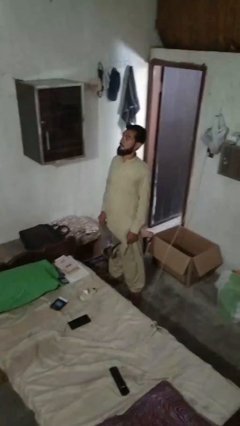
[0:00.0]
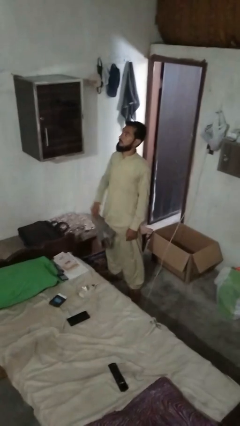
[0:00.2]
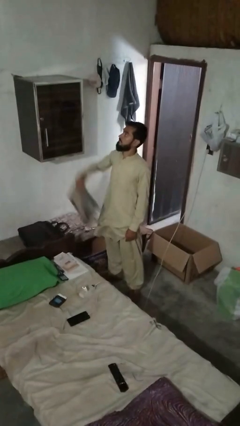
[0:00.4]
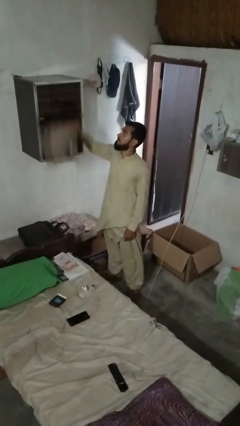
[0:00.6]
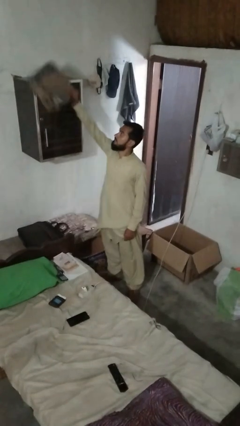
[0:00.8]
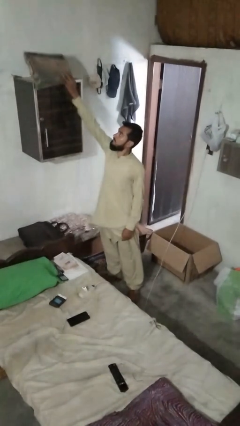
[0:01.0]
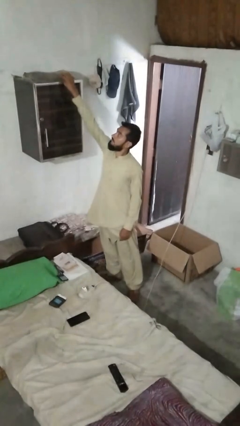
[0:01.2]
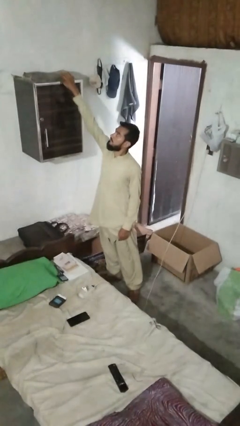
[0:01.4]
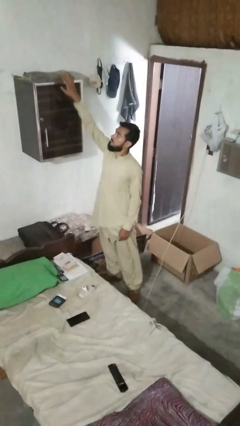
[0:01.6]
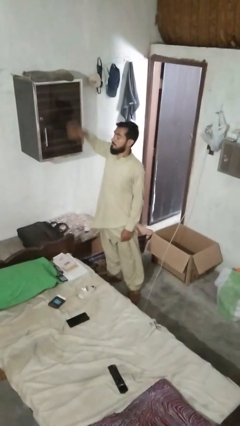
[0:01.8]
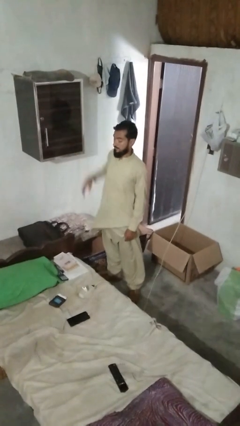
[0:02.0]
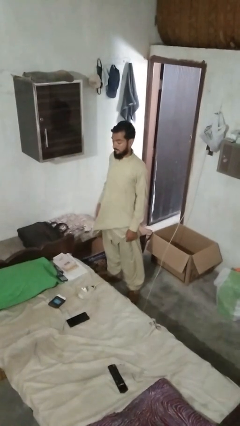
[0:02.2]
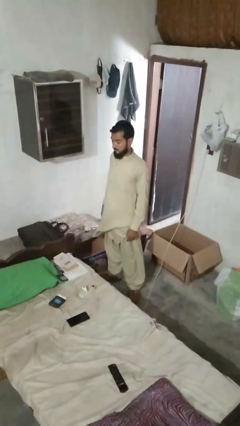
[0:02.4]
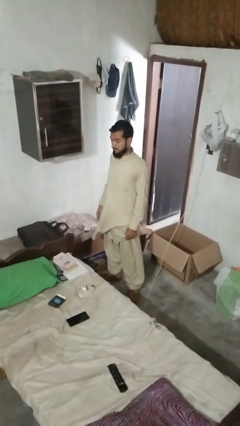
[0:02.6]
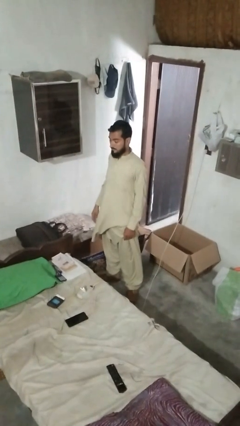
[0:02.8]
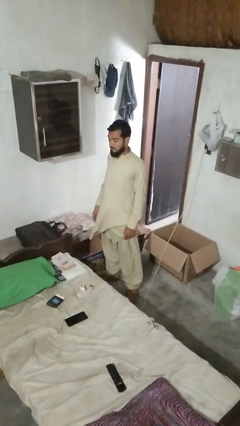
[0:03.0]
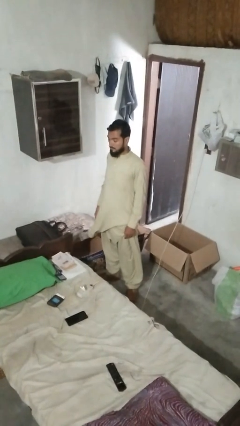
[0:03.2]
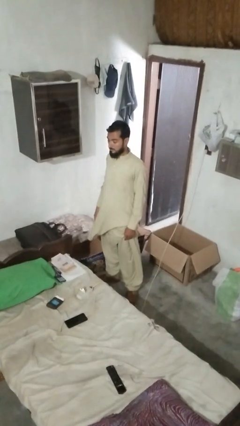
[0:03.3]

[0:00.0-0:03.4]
person picks up object from shelf

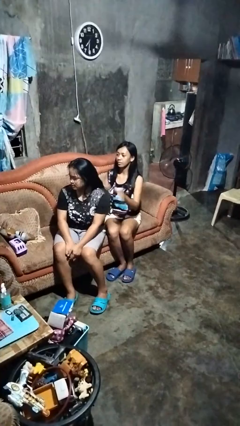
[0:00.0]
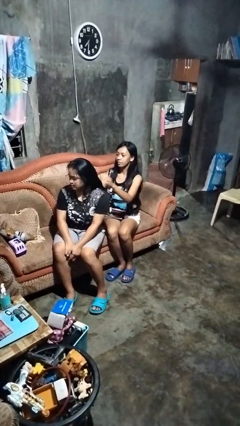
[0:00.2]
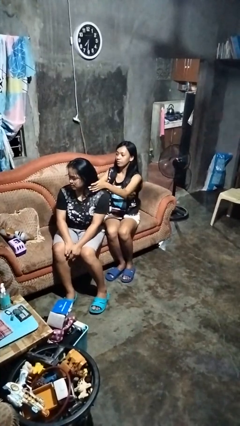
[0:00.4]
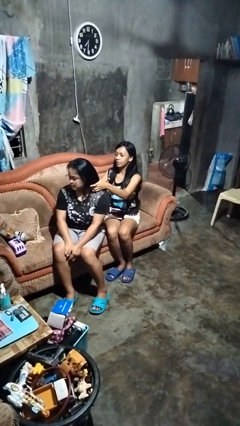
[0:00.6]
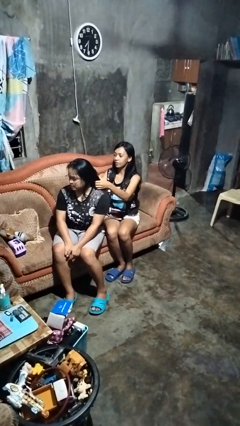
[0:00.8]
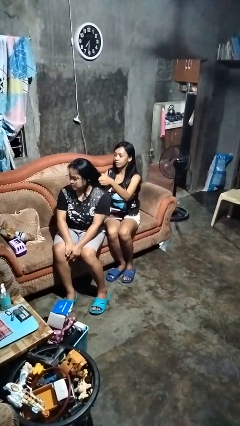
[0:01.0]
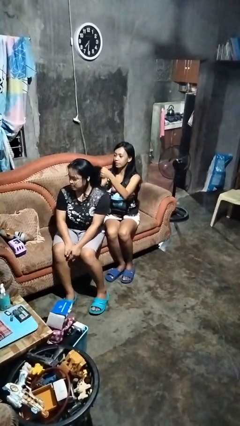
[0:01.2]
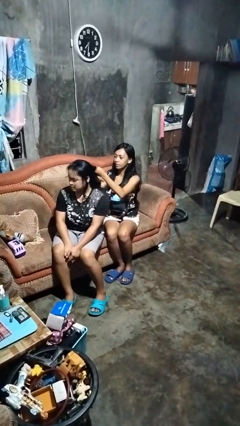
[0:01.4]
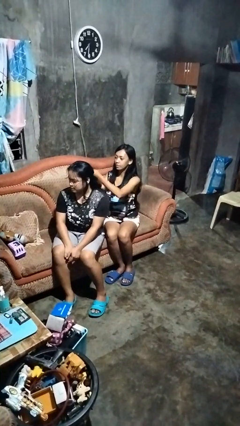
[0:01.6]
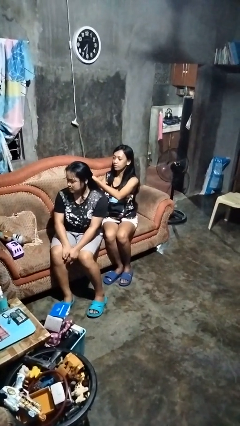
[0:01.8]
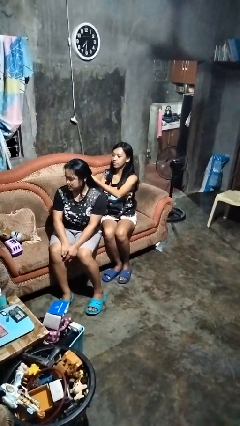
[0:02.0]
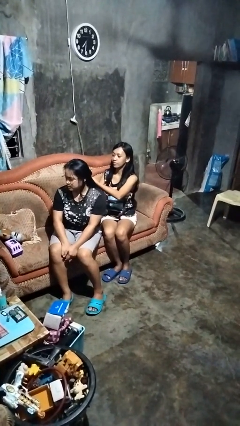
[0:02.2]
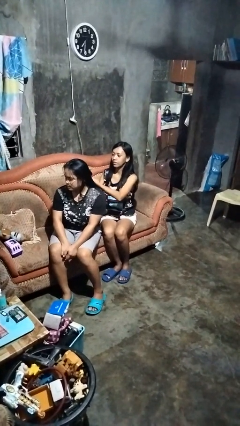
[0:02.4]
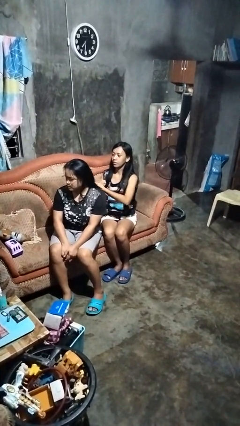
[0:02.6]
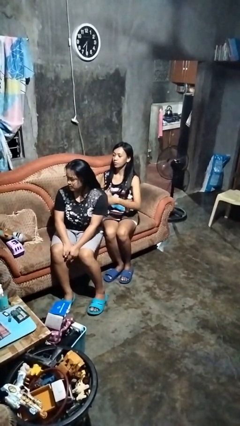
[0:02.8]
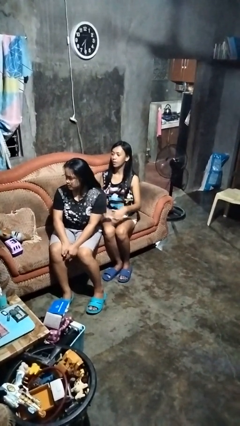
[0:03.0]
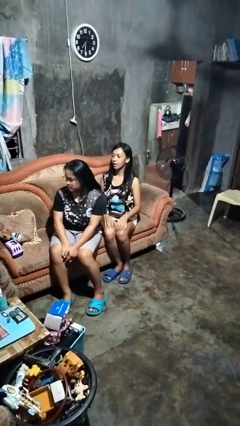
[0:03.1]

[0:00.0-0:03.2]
person braids hair of person

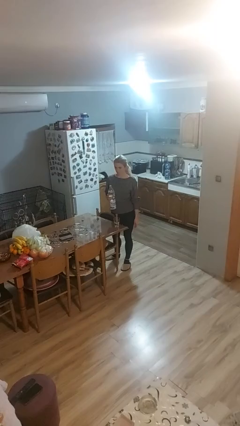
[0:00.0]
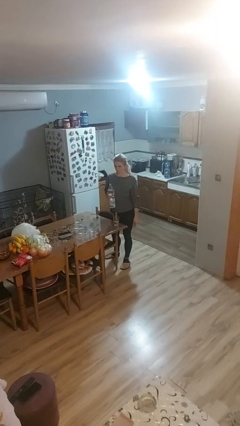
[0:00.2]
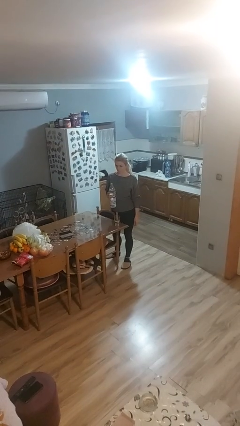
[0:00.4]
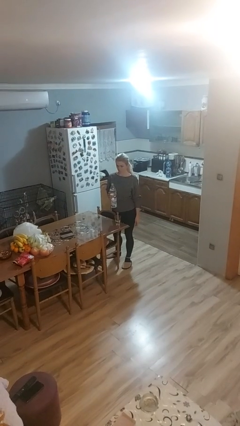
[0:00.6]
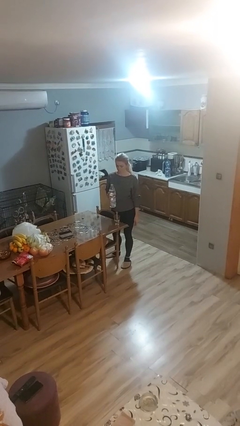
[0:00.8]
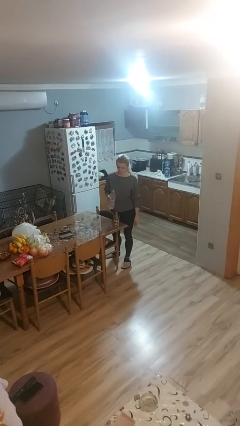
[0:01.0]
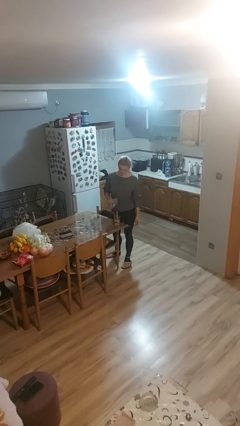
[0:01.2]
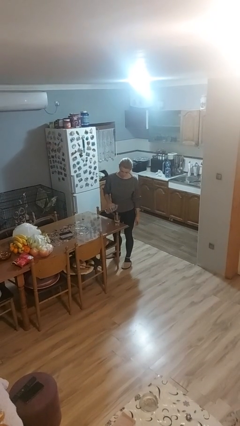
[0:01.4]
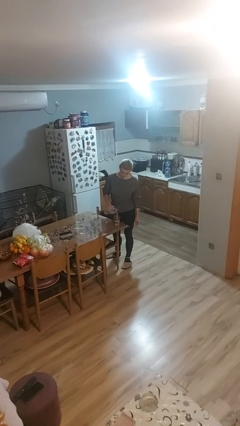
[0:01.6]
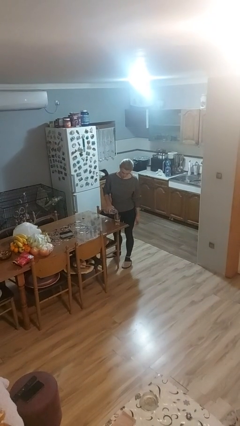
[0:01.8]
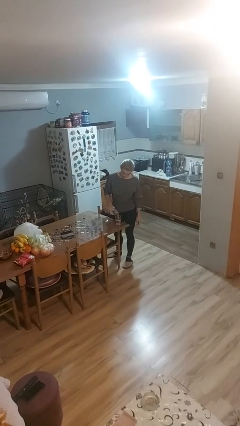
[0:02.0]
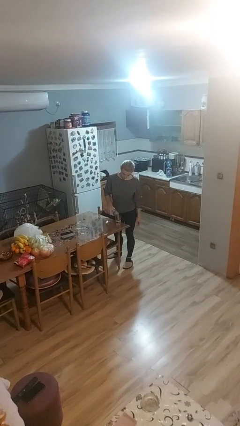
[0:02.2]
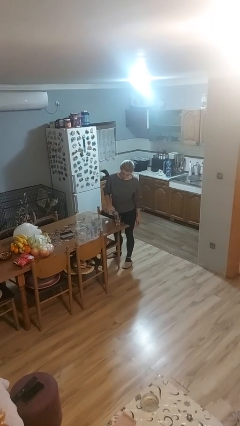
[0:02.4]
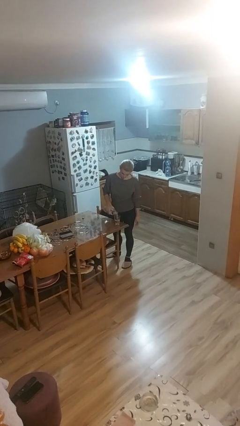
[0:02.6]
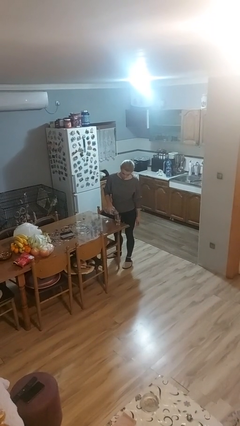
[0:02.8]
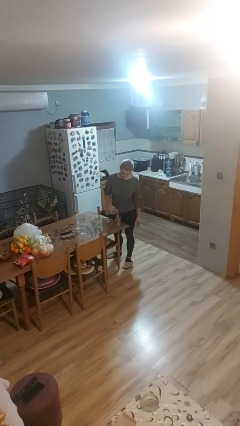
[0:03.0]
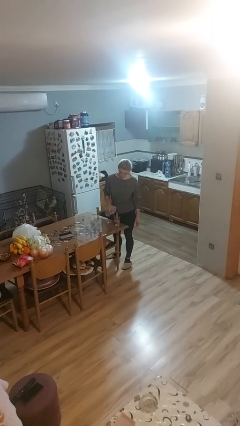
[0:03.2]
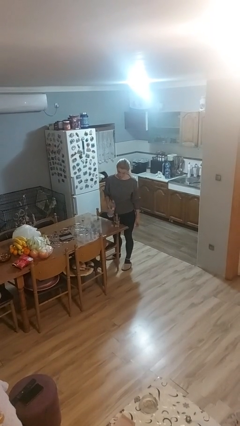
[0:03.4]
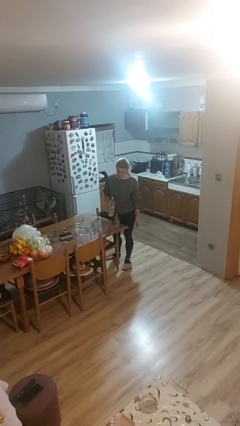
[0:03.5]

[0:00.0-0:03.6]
person pours liquid into cup

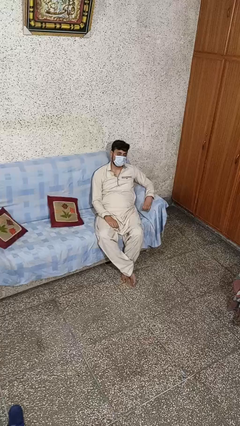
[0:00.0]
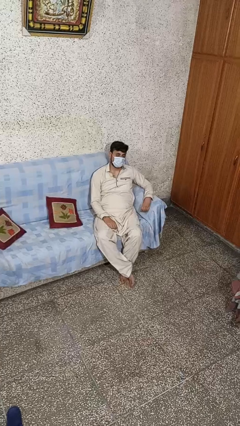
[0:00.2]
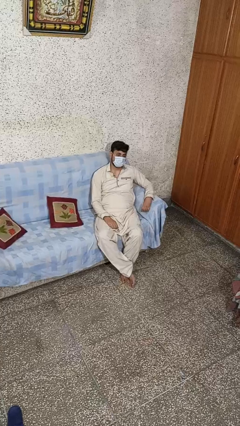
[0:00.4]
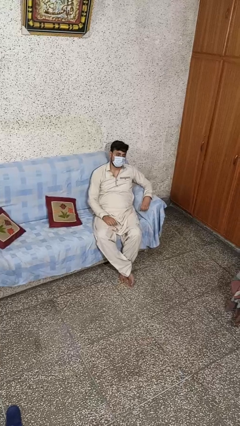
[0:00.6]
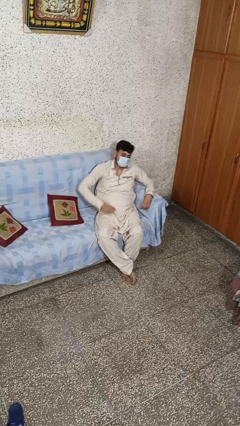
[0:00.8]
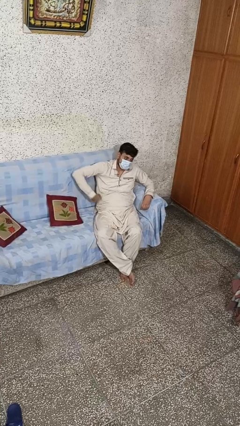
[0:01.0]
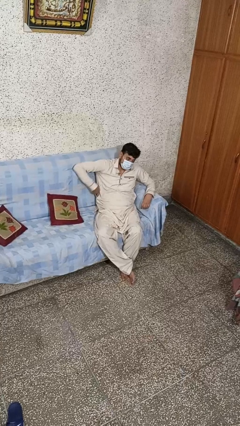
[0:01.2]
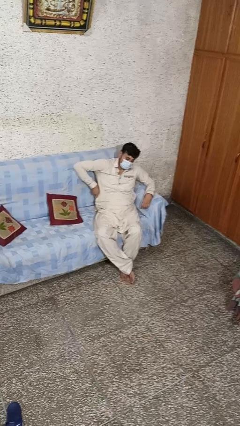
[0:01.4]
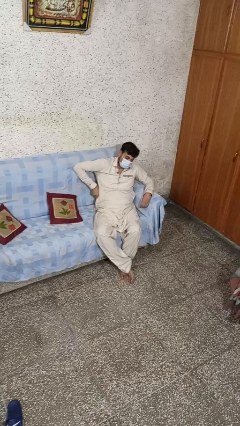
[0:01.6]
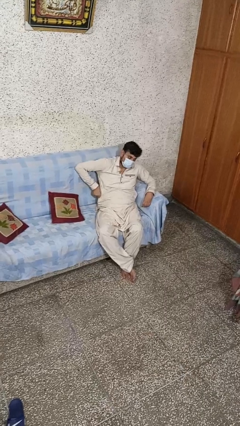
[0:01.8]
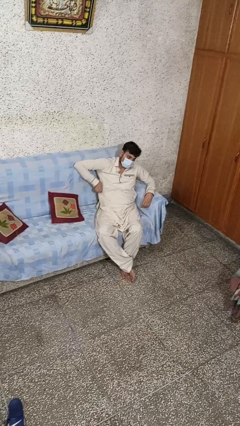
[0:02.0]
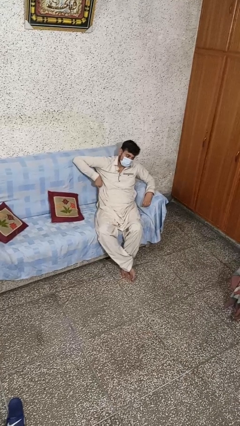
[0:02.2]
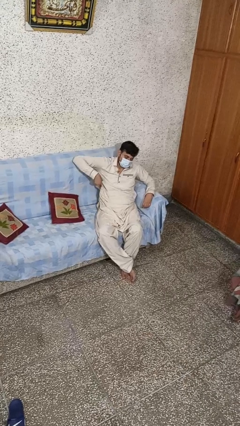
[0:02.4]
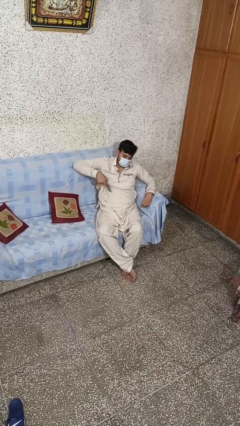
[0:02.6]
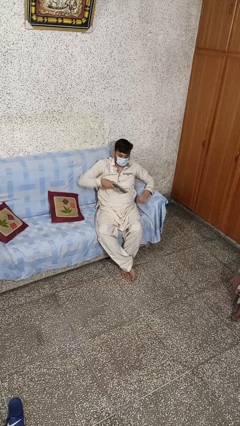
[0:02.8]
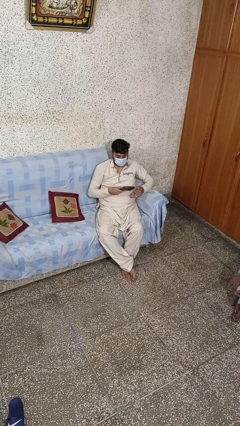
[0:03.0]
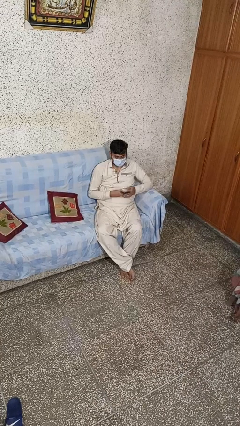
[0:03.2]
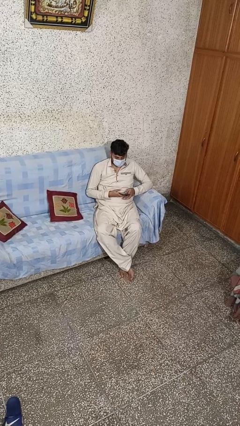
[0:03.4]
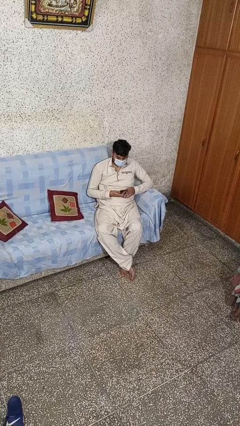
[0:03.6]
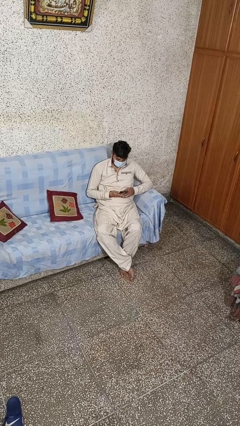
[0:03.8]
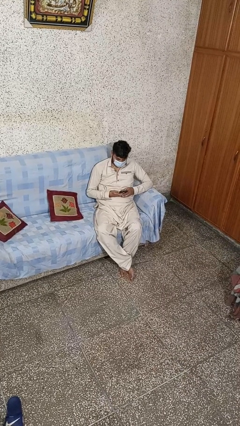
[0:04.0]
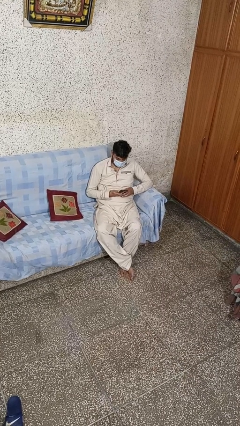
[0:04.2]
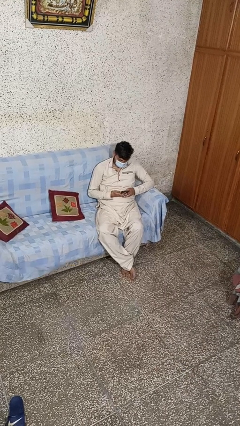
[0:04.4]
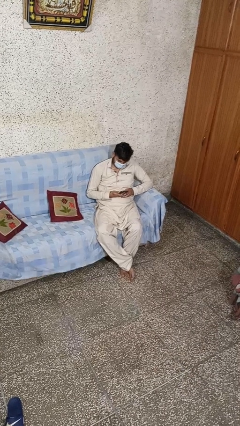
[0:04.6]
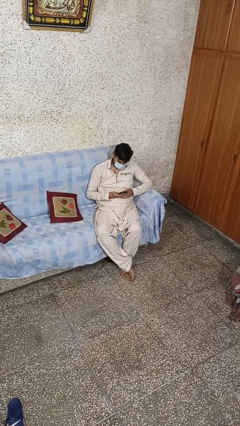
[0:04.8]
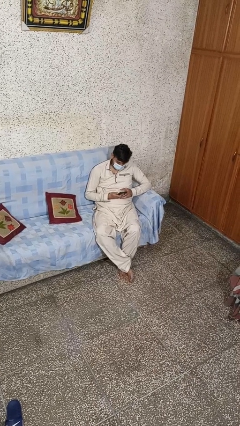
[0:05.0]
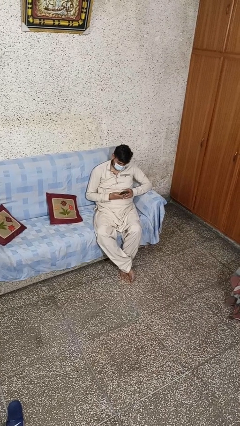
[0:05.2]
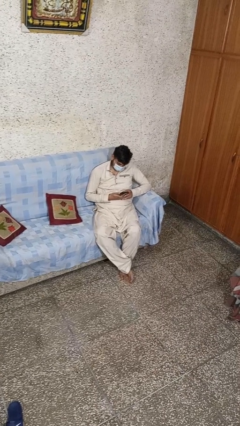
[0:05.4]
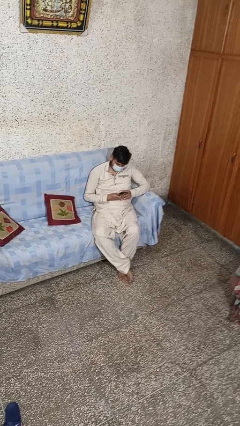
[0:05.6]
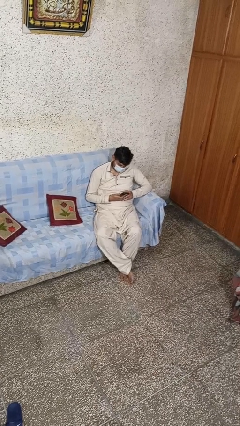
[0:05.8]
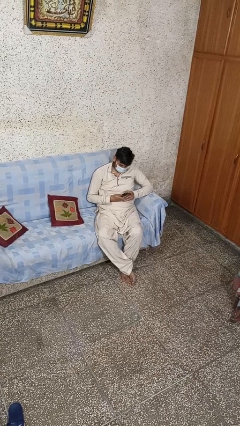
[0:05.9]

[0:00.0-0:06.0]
person takes phone from pocket

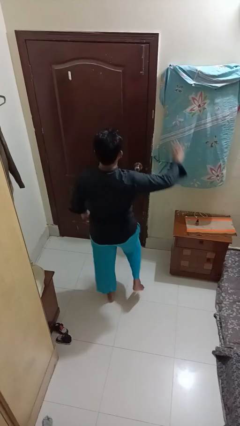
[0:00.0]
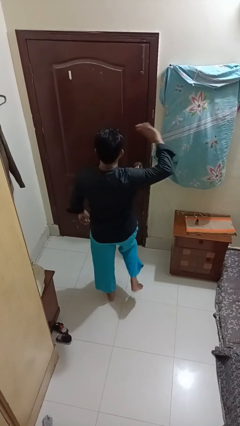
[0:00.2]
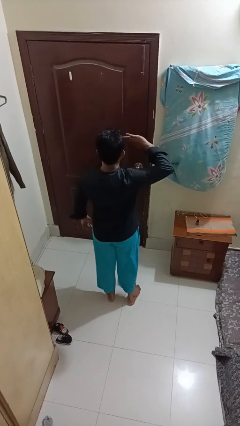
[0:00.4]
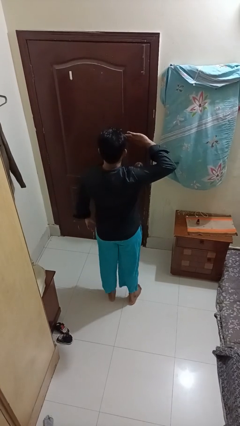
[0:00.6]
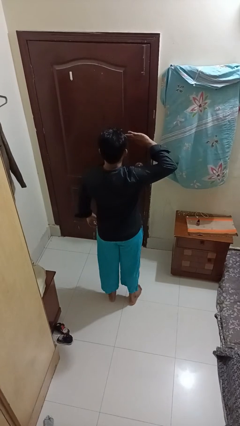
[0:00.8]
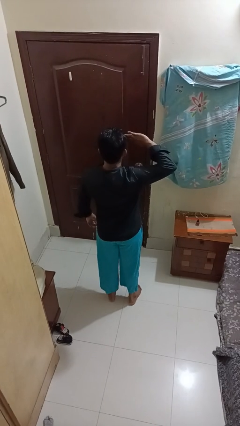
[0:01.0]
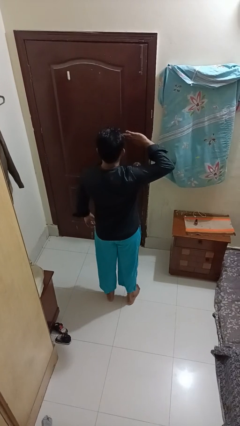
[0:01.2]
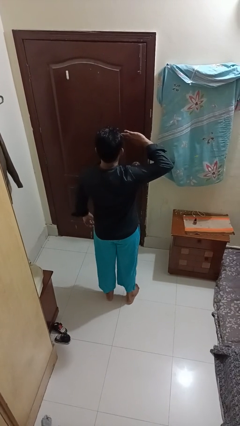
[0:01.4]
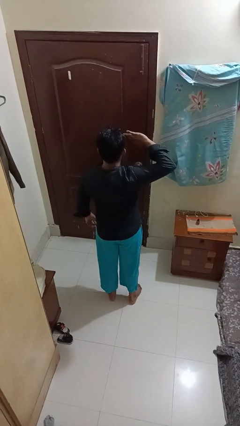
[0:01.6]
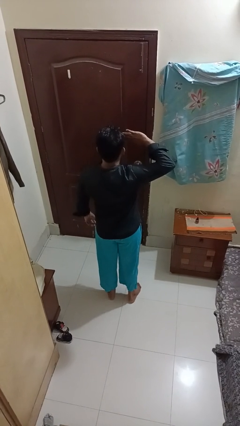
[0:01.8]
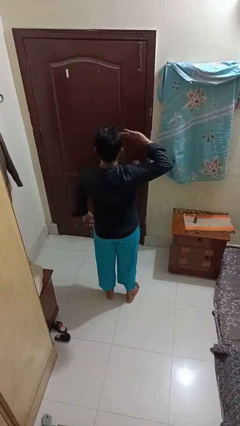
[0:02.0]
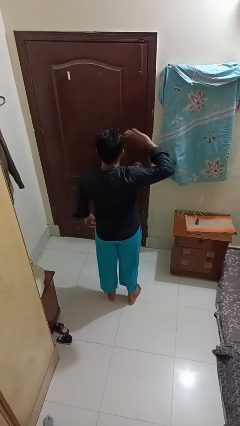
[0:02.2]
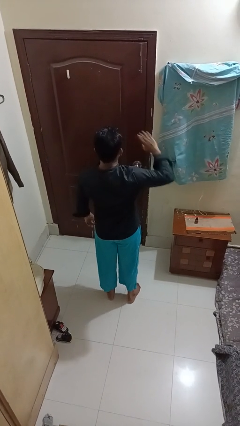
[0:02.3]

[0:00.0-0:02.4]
person salutes
